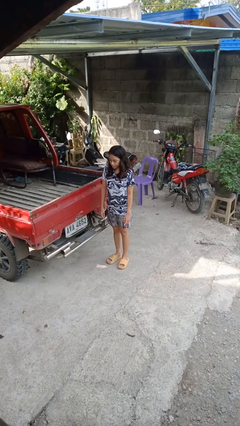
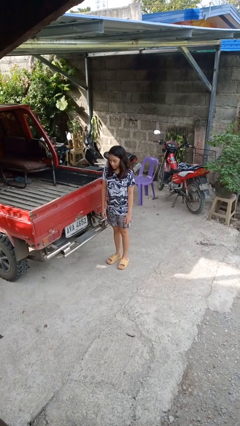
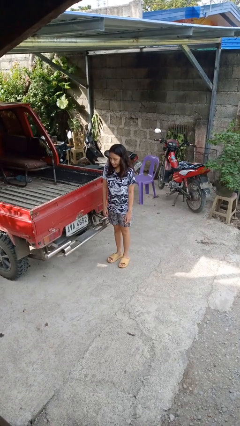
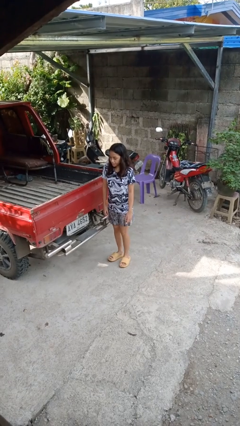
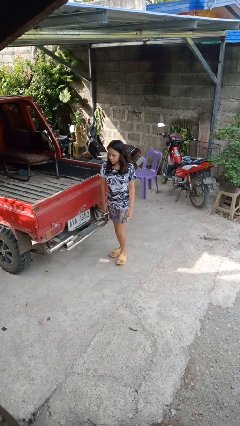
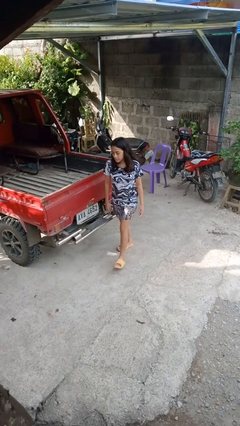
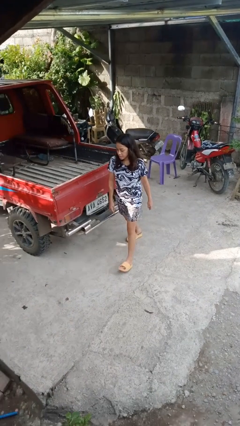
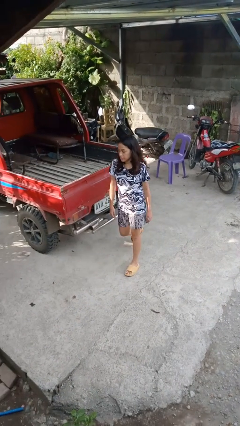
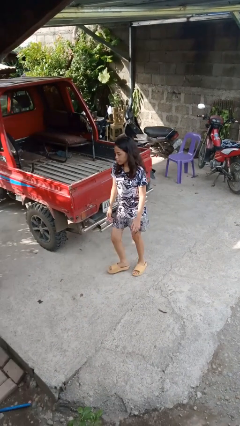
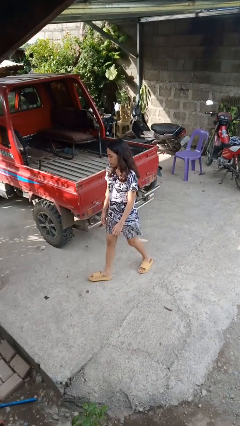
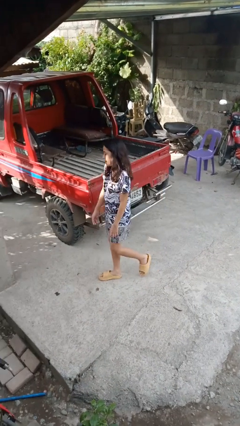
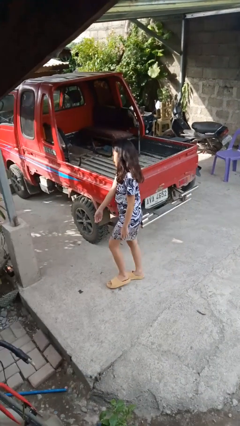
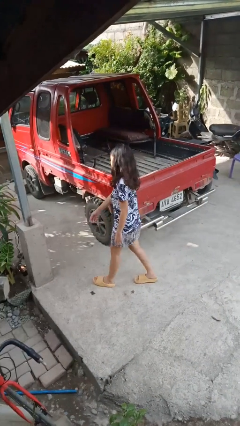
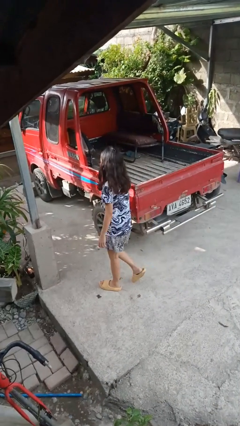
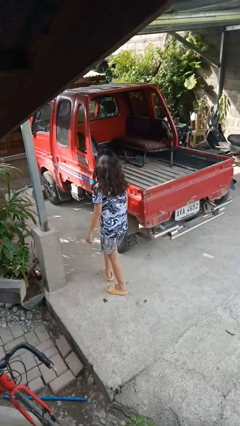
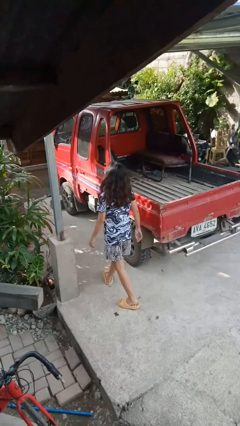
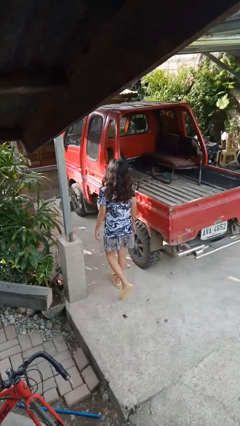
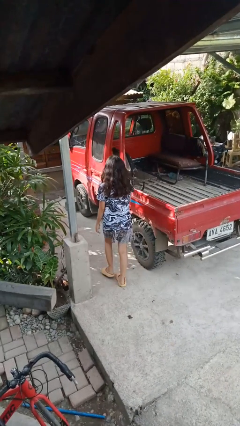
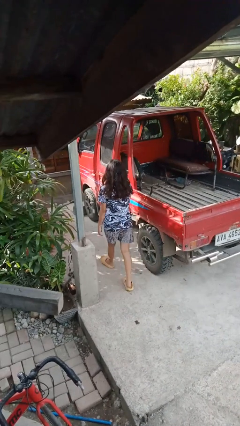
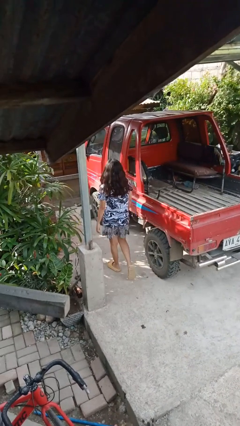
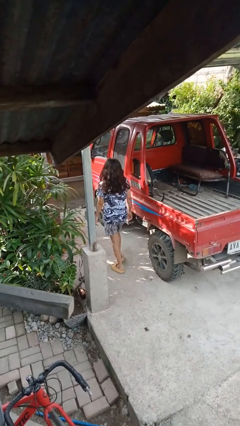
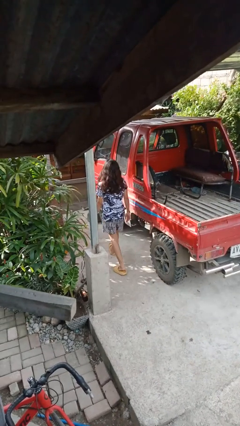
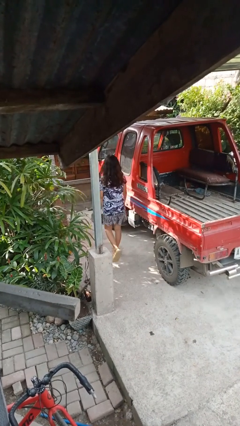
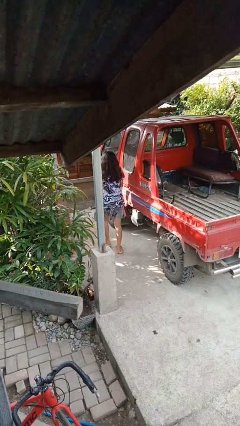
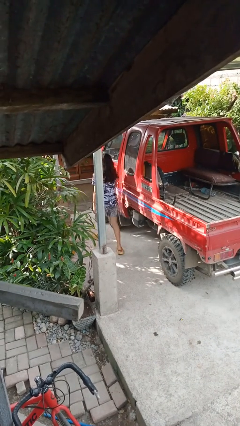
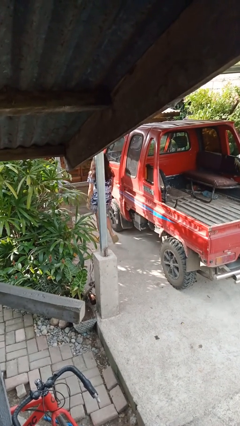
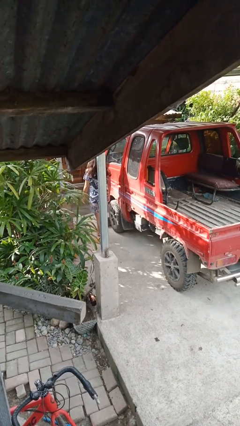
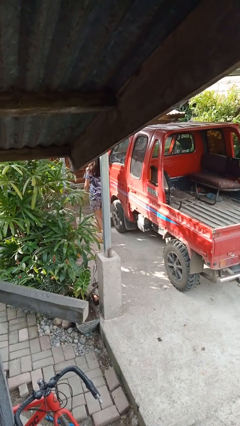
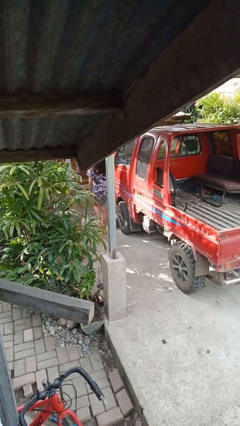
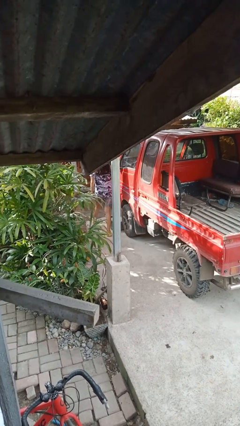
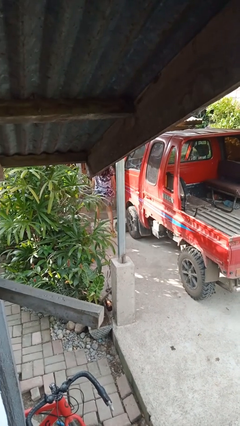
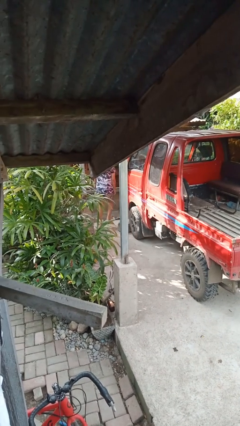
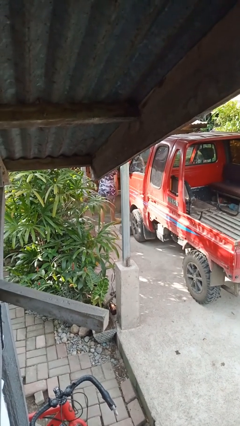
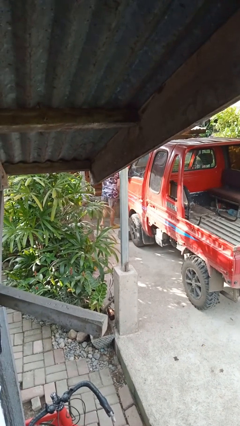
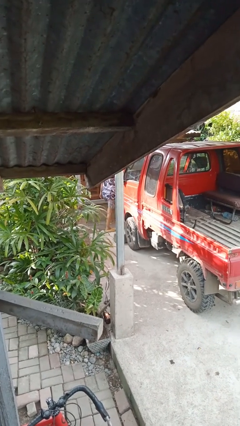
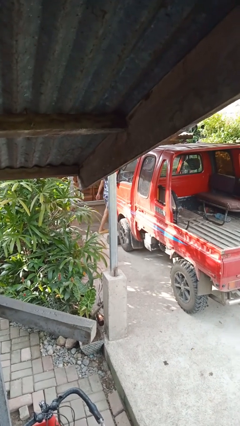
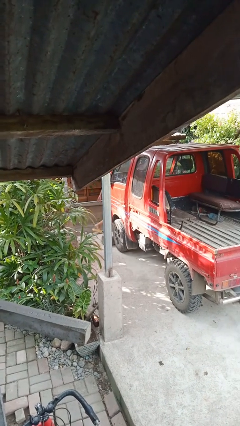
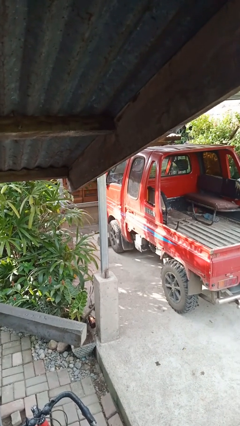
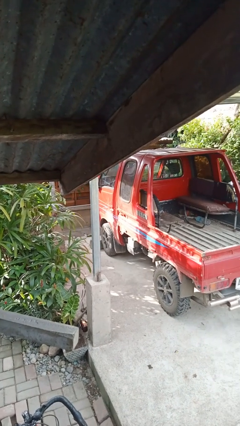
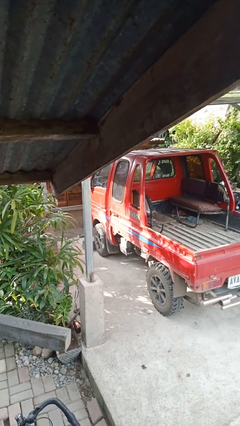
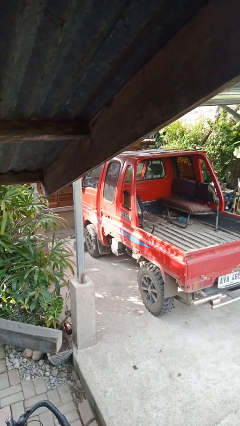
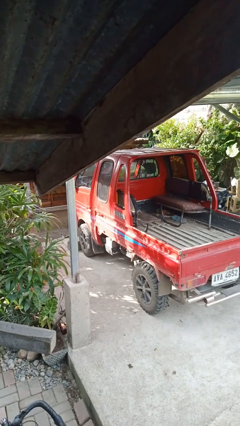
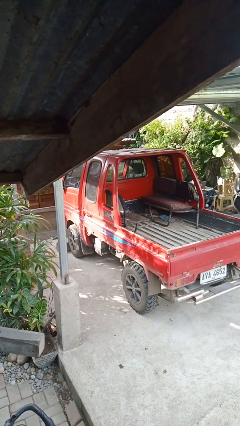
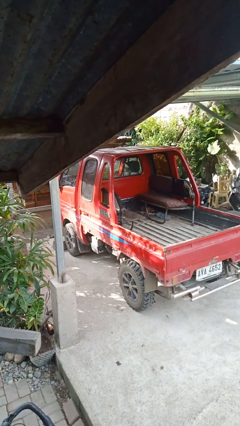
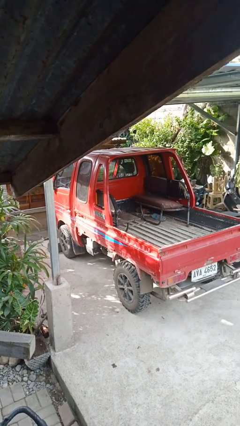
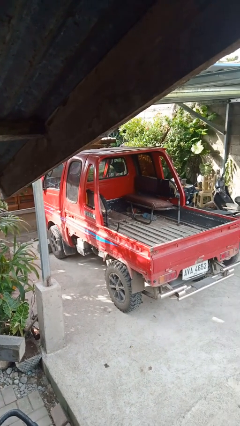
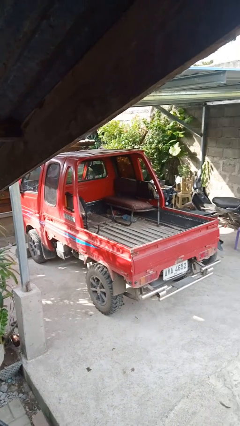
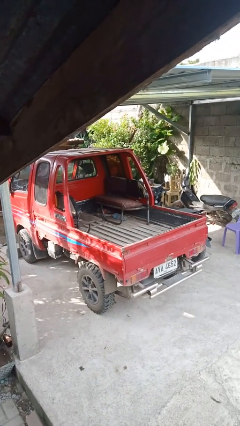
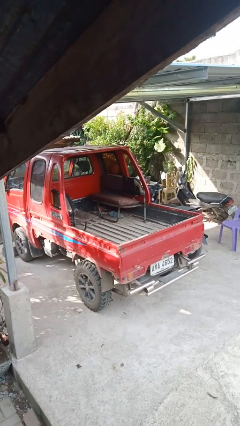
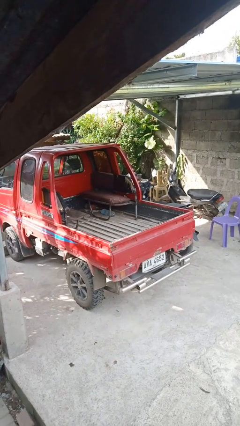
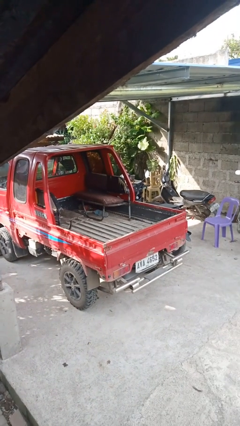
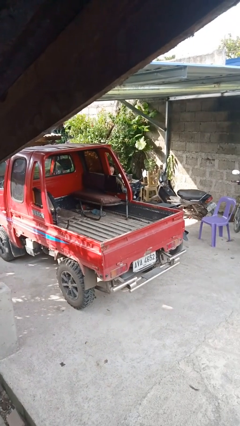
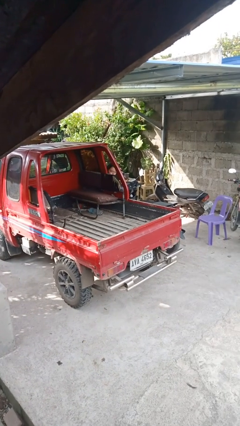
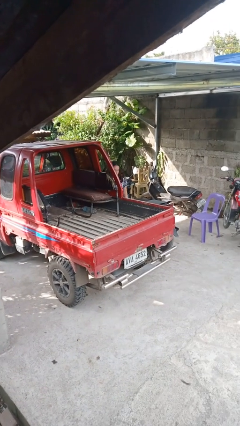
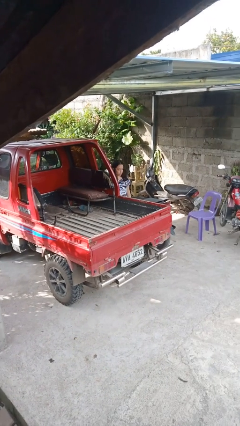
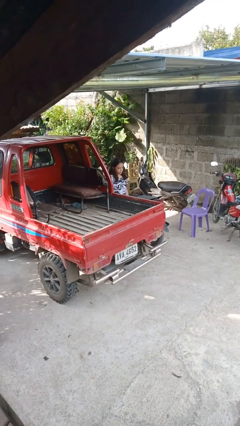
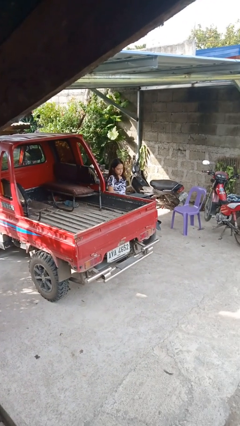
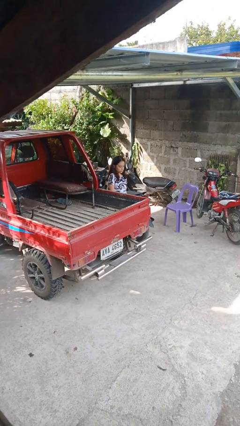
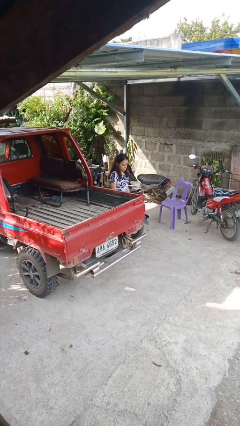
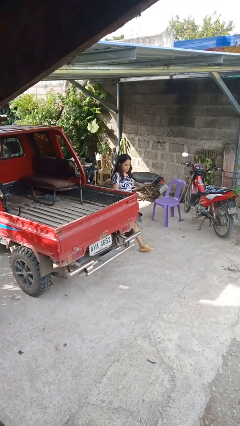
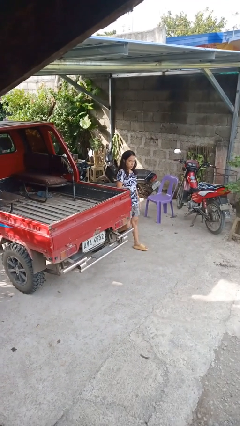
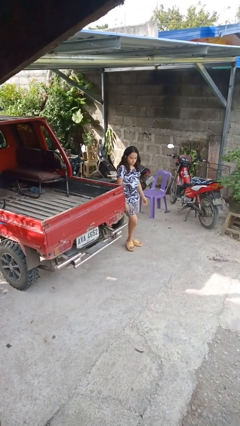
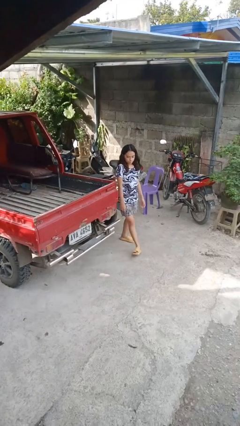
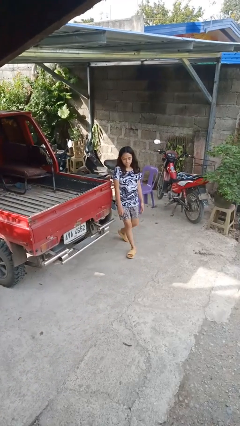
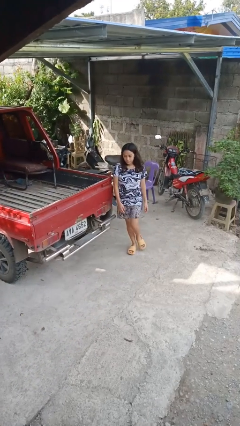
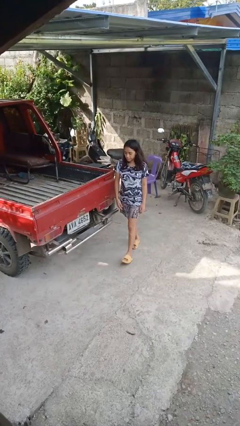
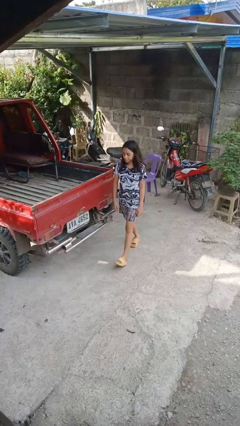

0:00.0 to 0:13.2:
person walks around car

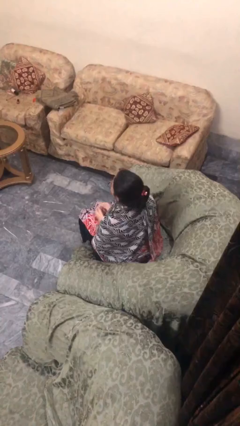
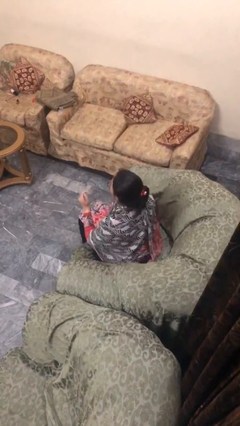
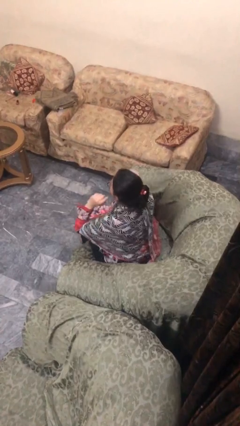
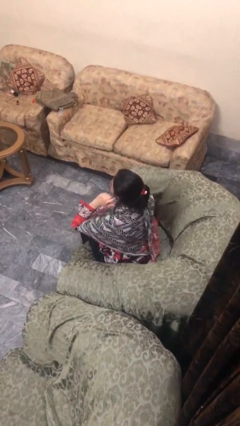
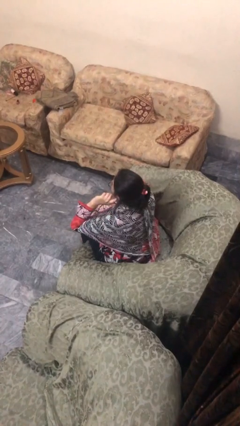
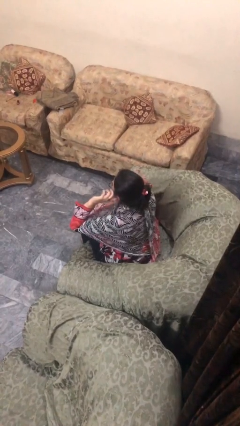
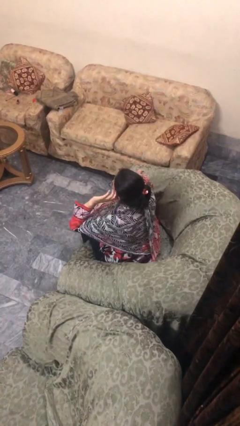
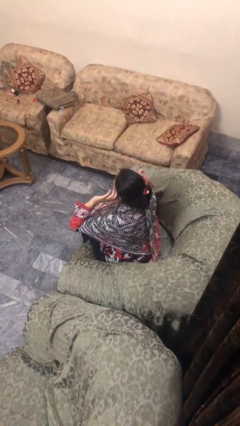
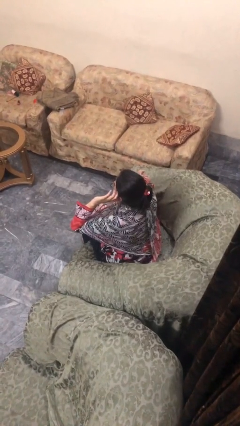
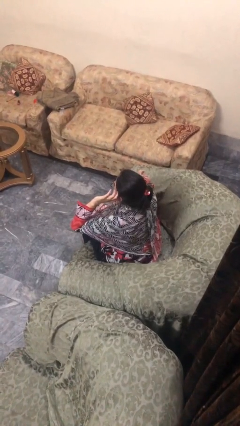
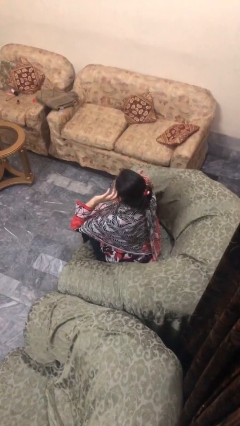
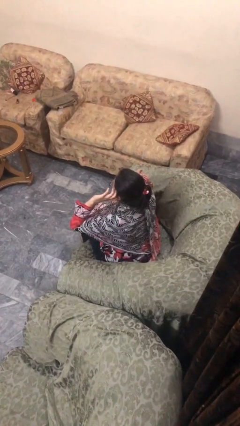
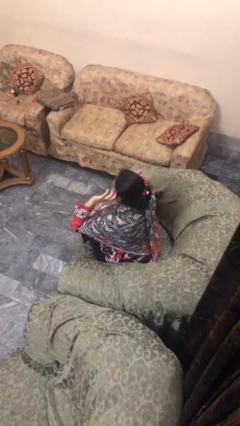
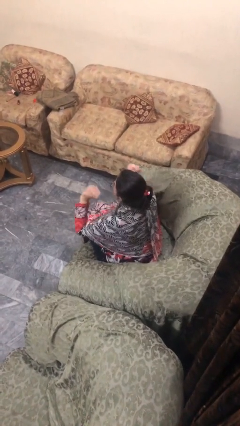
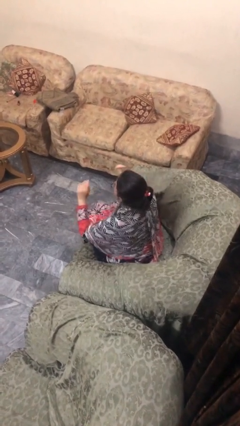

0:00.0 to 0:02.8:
person puts fingers in ear

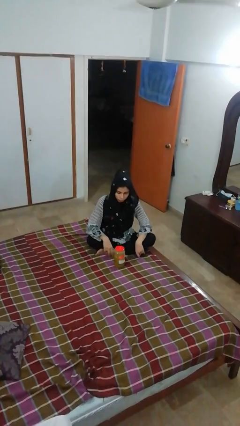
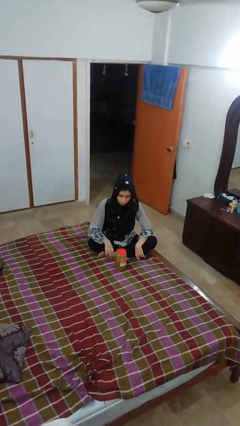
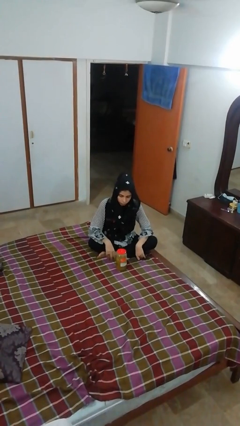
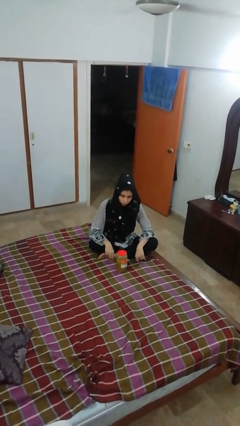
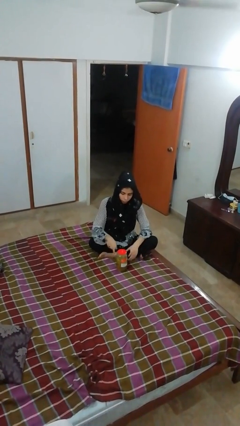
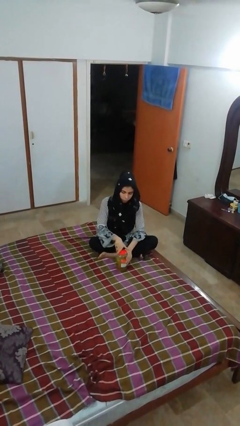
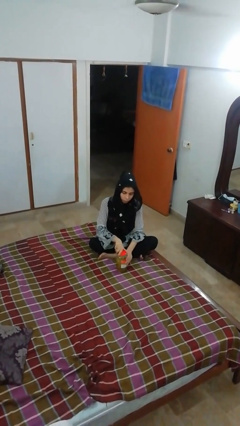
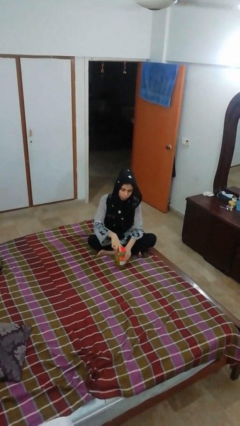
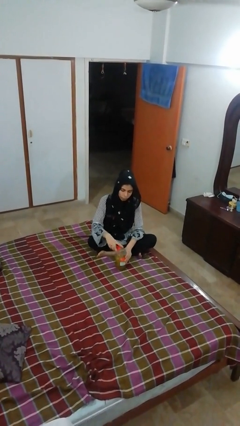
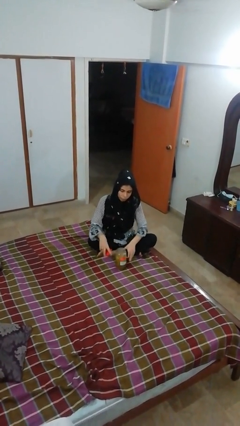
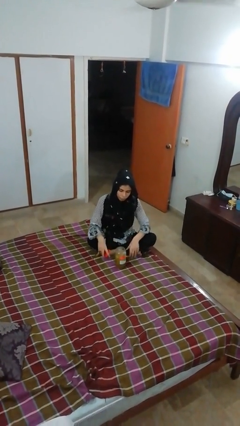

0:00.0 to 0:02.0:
person opens jar
